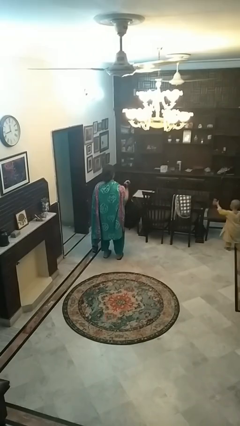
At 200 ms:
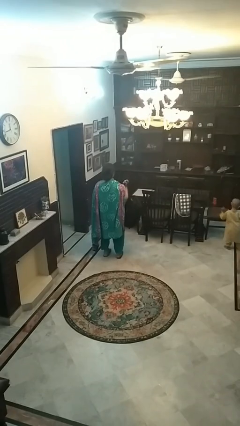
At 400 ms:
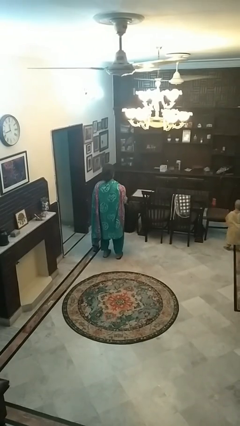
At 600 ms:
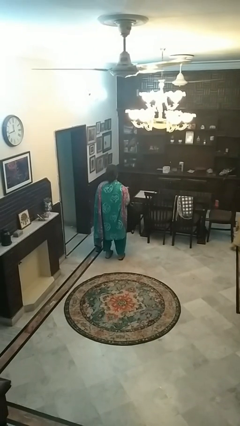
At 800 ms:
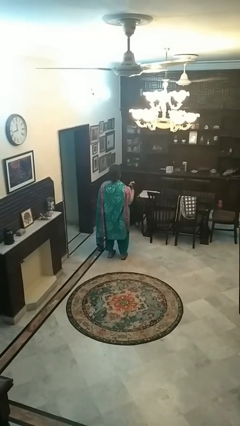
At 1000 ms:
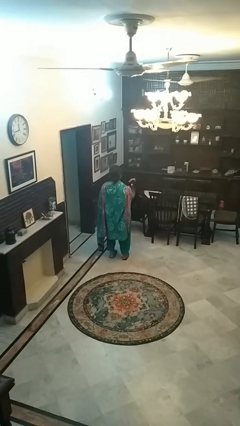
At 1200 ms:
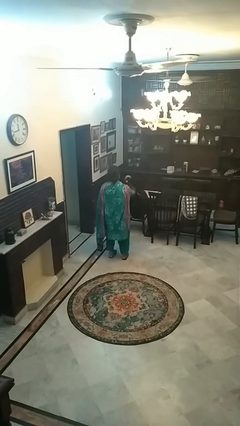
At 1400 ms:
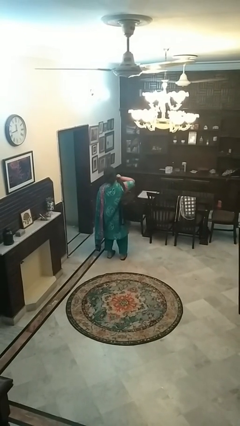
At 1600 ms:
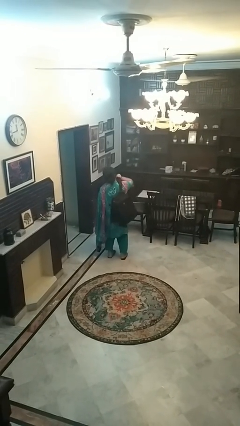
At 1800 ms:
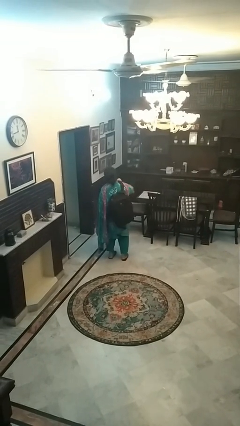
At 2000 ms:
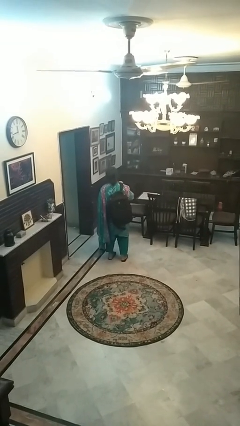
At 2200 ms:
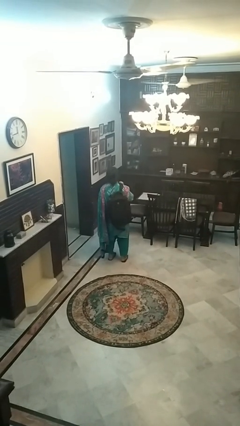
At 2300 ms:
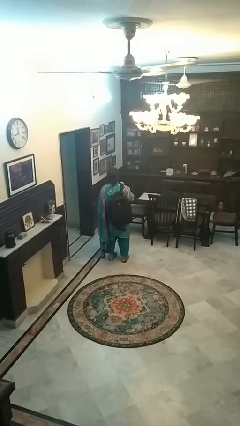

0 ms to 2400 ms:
person puts on backpack

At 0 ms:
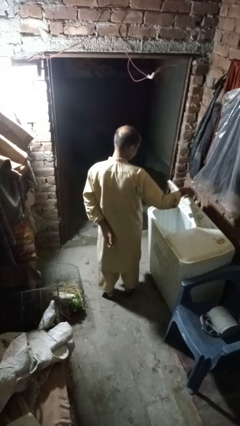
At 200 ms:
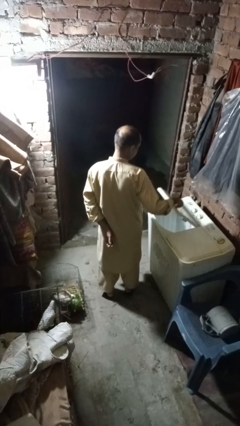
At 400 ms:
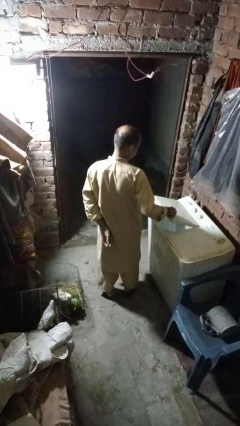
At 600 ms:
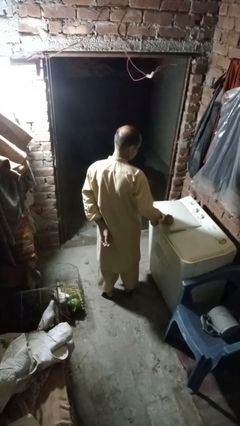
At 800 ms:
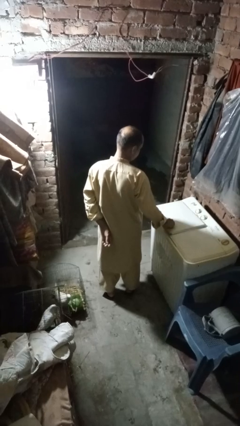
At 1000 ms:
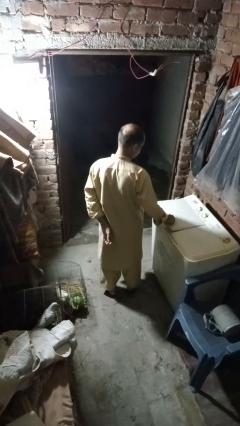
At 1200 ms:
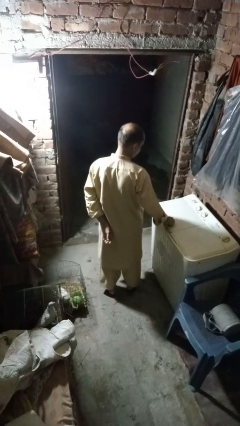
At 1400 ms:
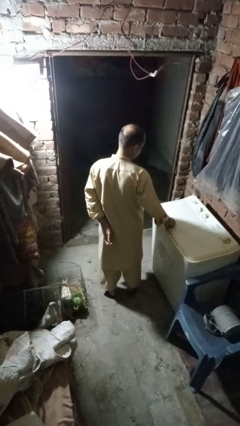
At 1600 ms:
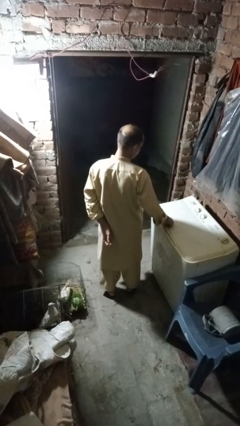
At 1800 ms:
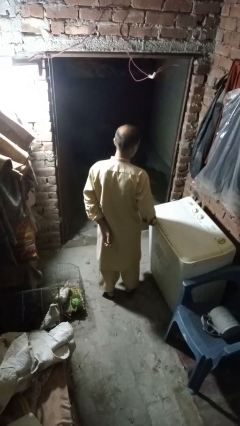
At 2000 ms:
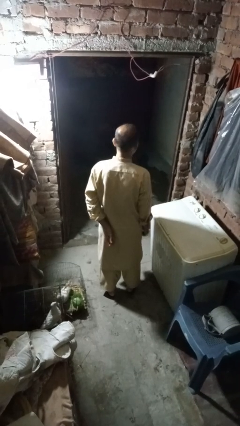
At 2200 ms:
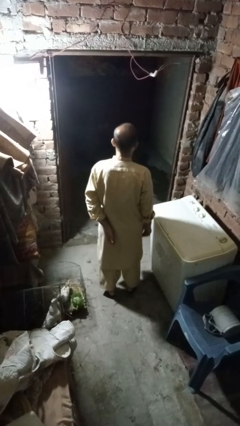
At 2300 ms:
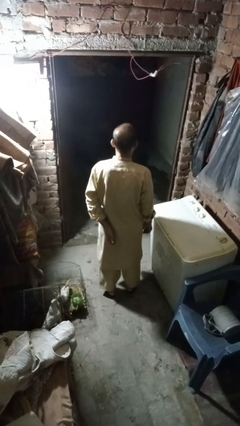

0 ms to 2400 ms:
person closes clothes washer

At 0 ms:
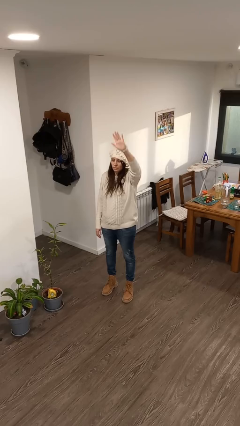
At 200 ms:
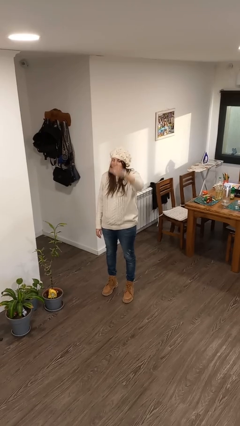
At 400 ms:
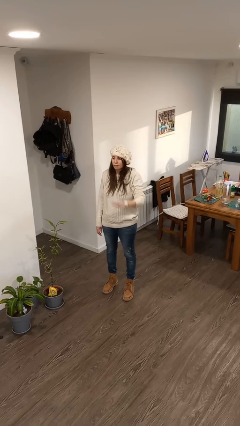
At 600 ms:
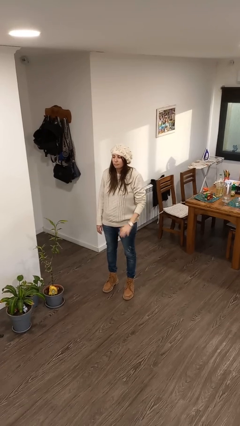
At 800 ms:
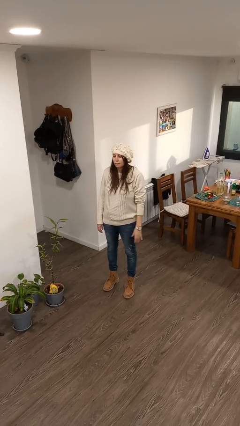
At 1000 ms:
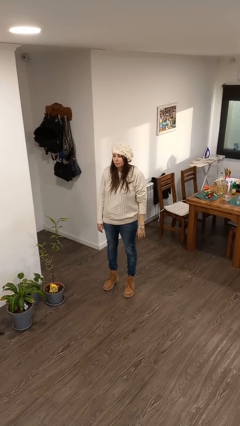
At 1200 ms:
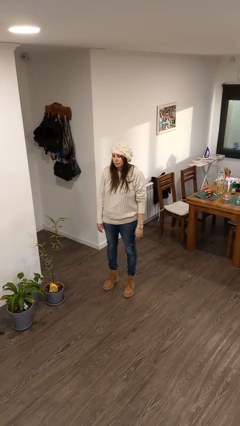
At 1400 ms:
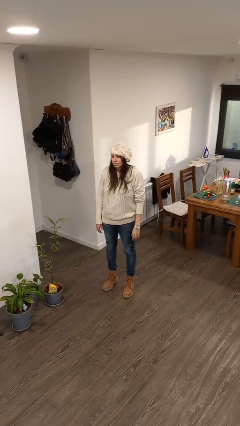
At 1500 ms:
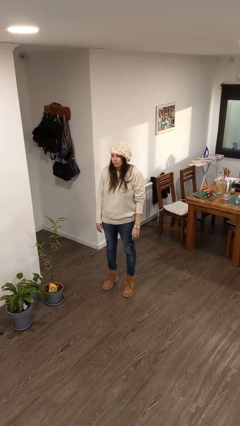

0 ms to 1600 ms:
person gestures lower hand

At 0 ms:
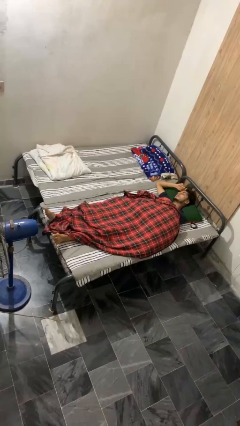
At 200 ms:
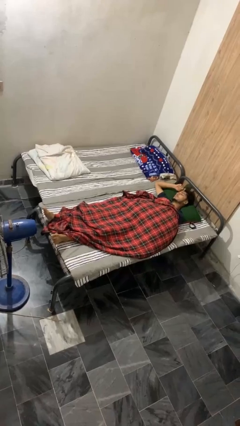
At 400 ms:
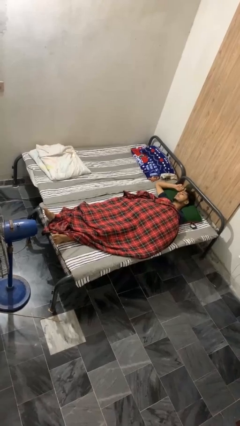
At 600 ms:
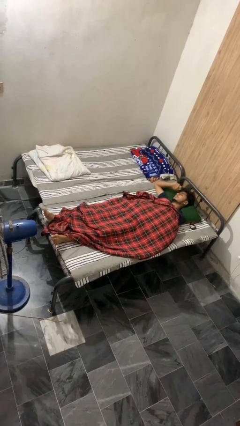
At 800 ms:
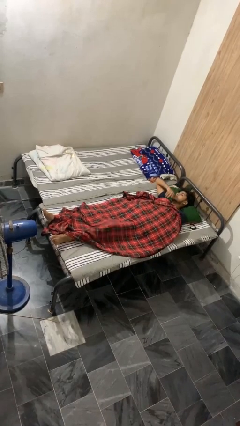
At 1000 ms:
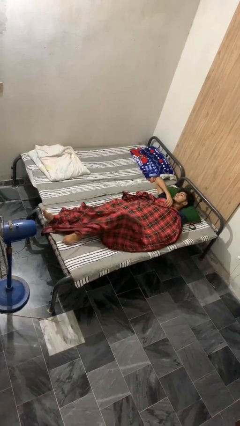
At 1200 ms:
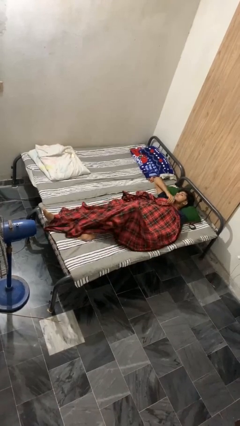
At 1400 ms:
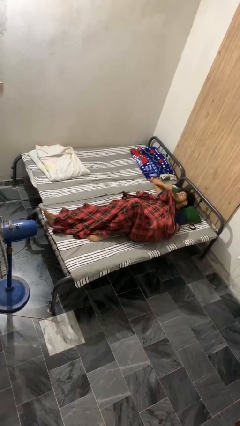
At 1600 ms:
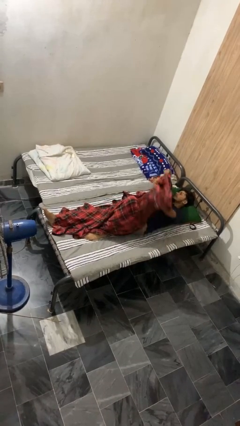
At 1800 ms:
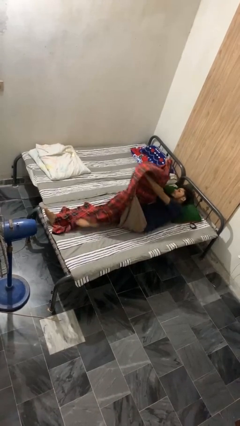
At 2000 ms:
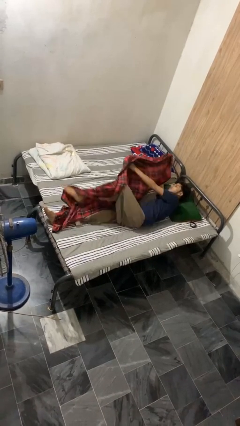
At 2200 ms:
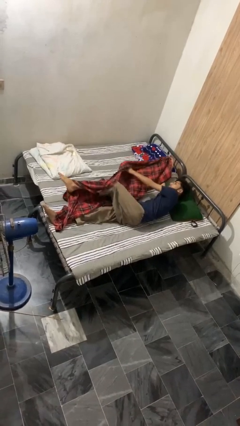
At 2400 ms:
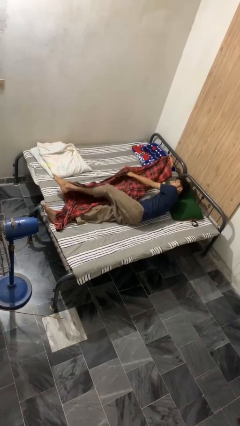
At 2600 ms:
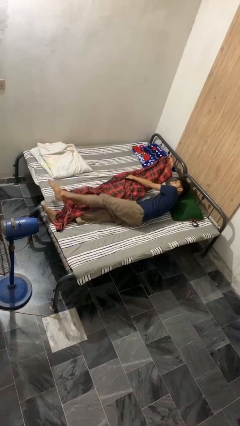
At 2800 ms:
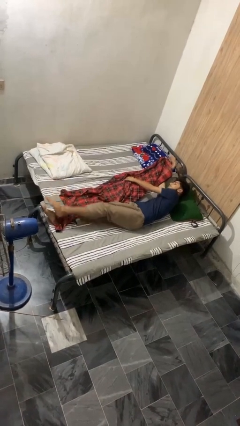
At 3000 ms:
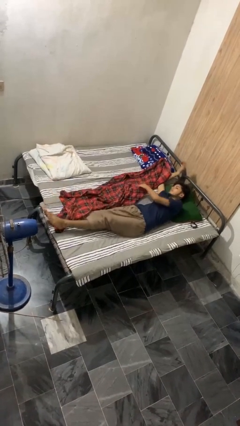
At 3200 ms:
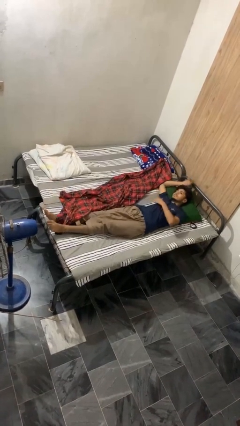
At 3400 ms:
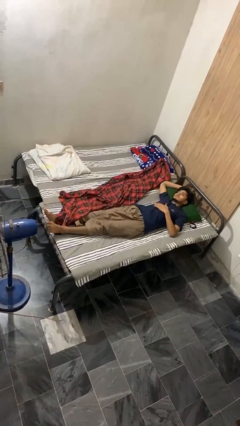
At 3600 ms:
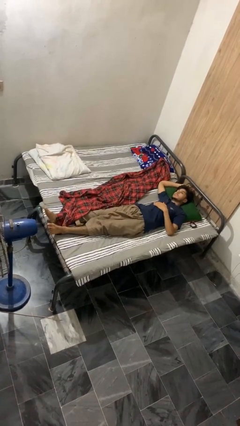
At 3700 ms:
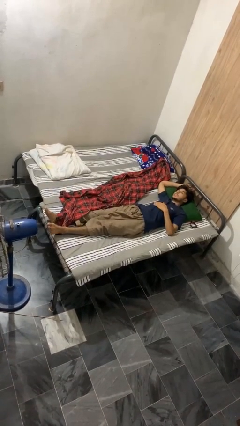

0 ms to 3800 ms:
person uncovers with bedsheets

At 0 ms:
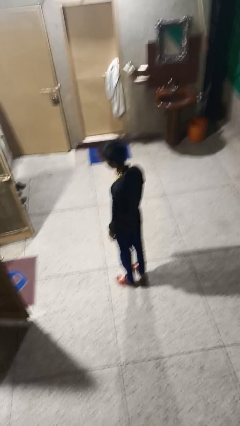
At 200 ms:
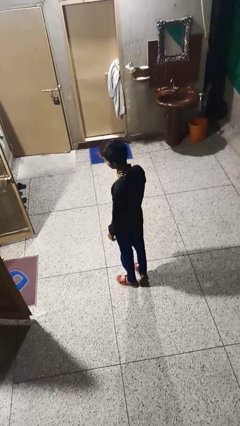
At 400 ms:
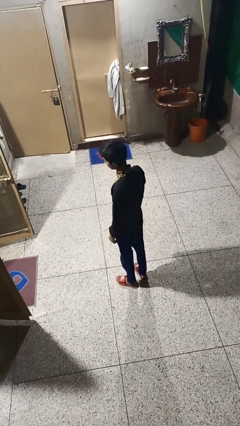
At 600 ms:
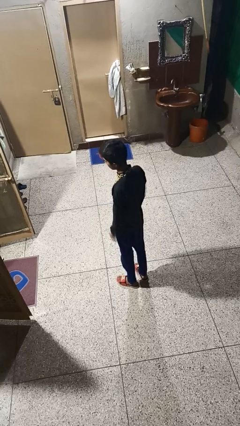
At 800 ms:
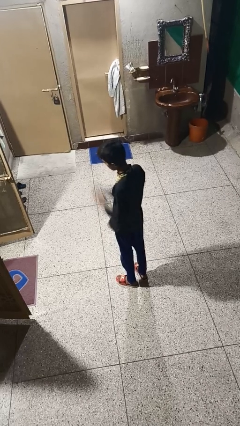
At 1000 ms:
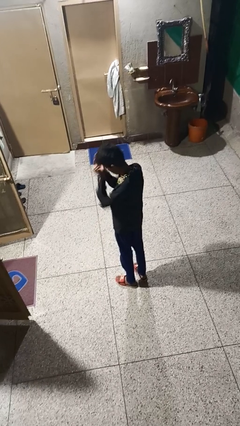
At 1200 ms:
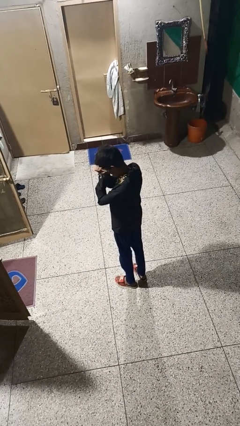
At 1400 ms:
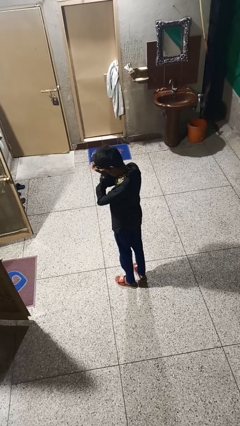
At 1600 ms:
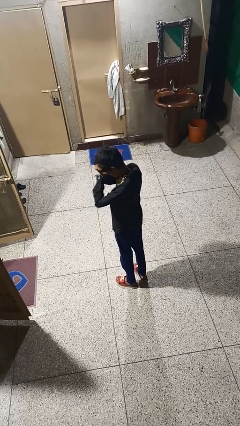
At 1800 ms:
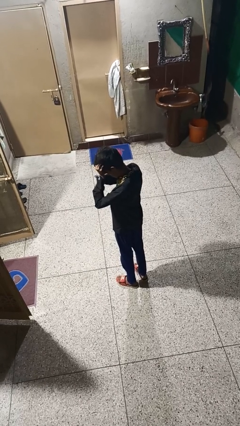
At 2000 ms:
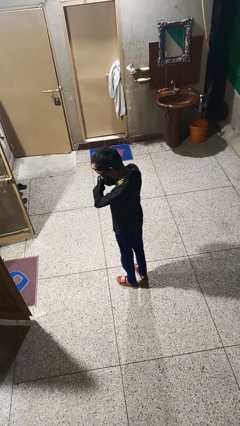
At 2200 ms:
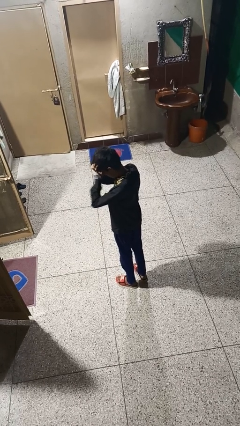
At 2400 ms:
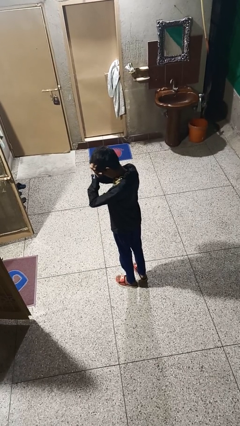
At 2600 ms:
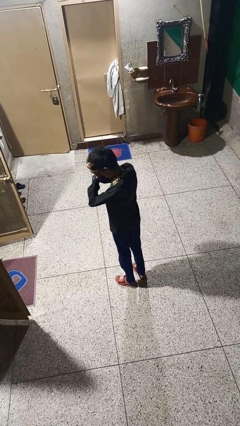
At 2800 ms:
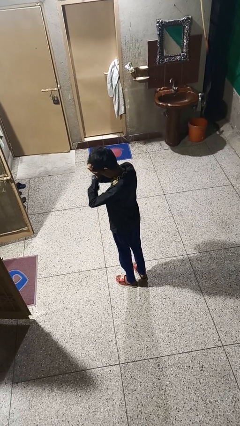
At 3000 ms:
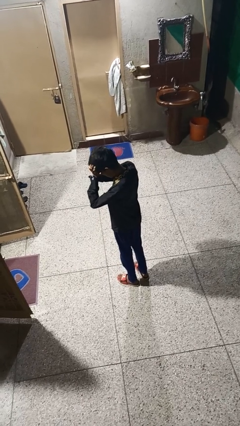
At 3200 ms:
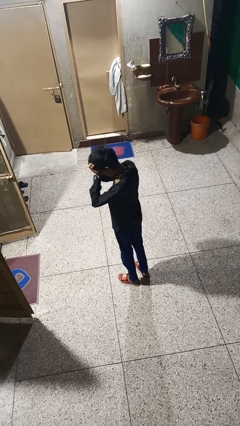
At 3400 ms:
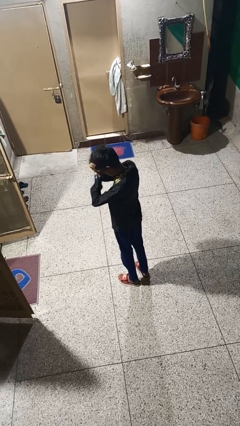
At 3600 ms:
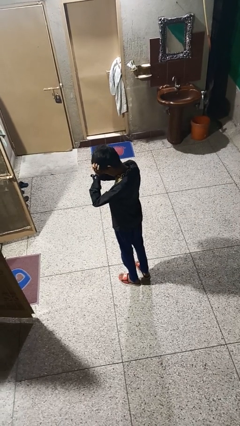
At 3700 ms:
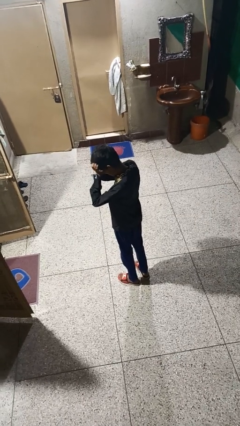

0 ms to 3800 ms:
person rubs eyes

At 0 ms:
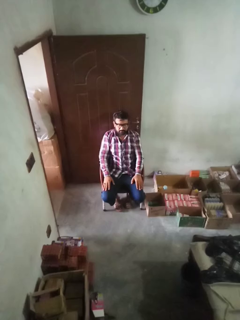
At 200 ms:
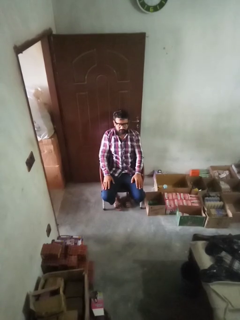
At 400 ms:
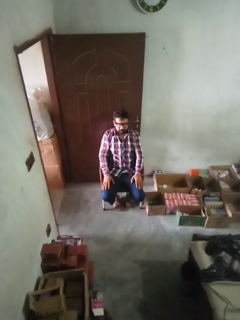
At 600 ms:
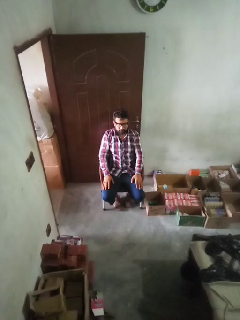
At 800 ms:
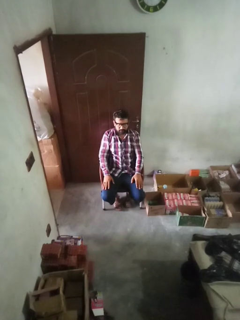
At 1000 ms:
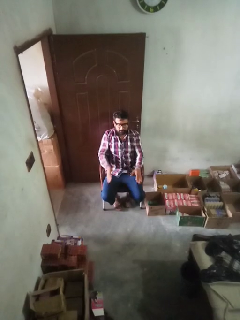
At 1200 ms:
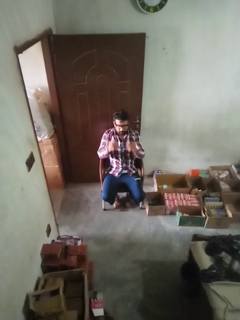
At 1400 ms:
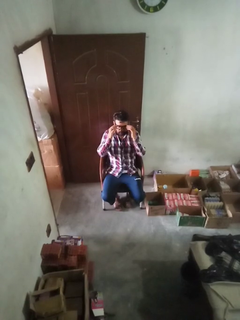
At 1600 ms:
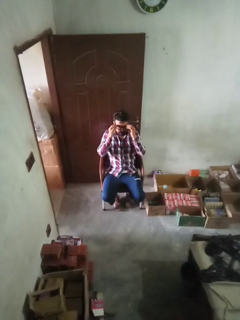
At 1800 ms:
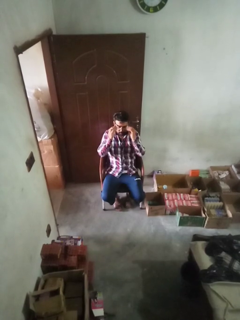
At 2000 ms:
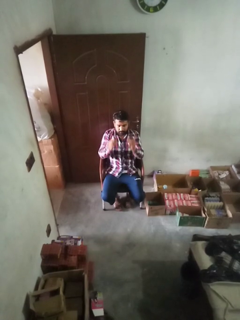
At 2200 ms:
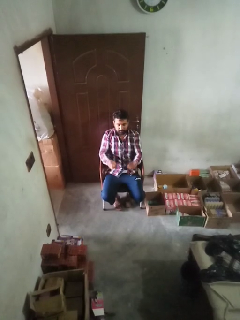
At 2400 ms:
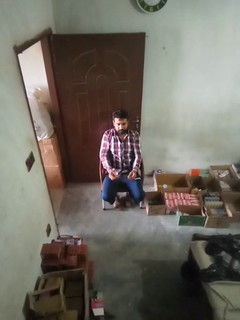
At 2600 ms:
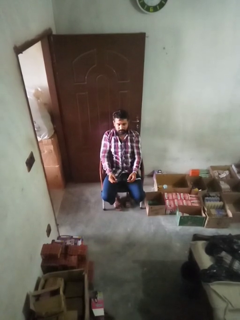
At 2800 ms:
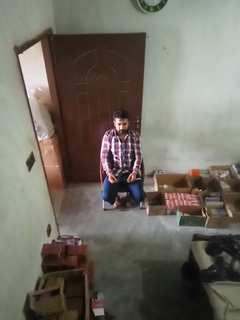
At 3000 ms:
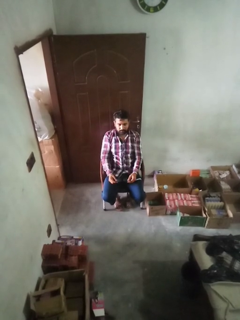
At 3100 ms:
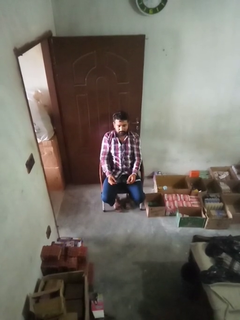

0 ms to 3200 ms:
person takes off glasses

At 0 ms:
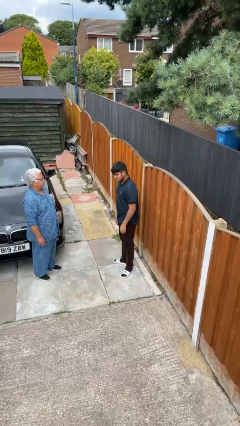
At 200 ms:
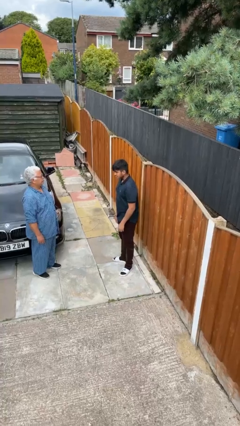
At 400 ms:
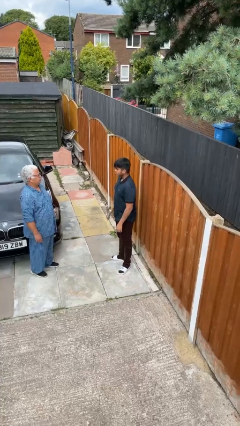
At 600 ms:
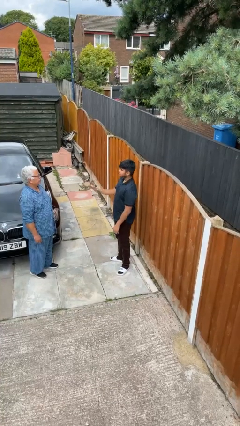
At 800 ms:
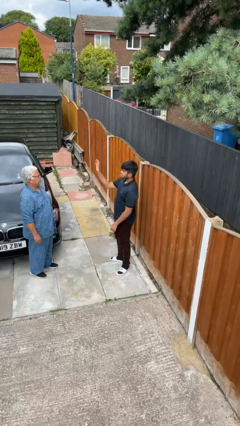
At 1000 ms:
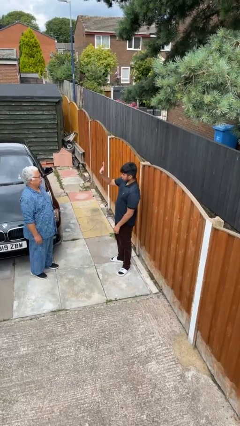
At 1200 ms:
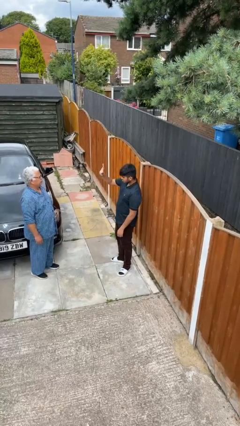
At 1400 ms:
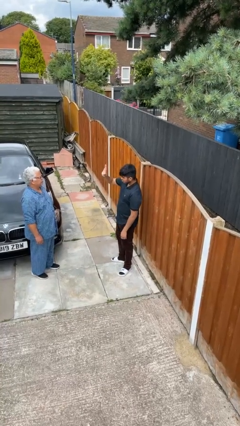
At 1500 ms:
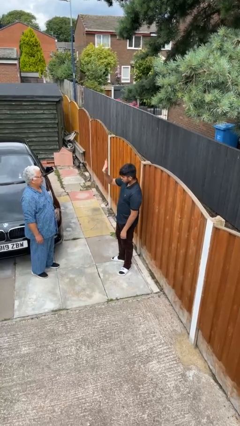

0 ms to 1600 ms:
person waves at person
